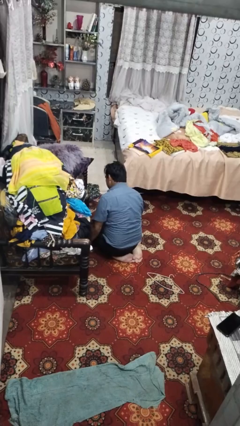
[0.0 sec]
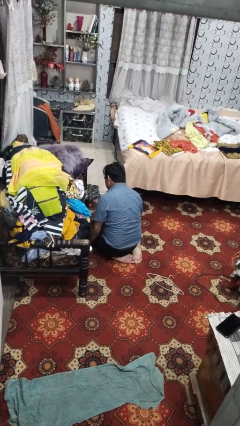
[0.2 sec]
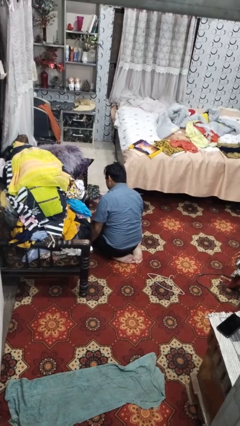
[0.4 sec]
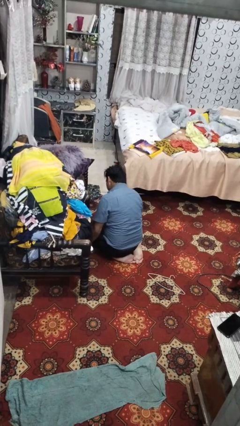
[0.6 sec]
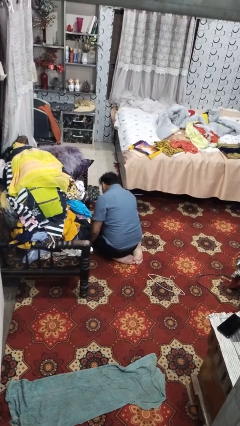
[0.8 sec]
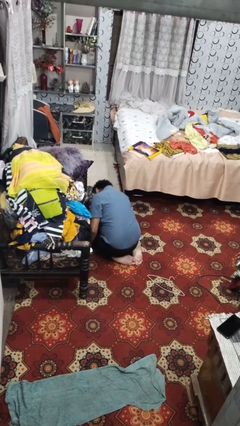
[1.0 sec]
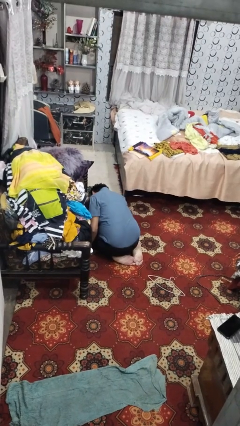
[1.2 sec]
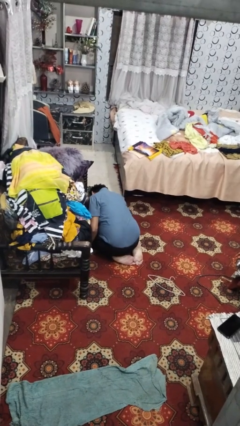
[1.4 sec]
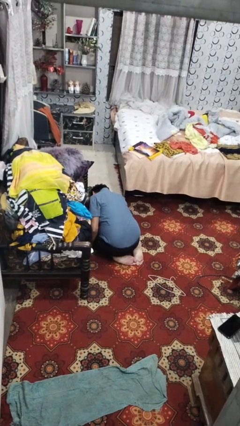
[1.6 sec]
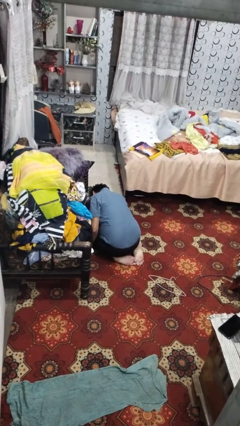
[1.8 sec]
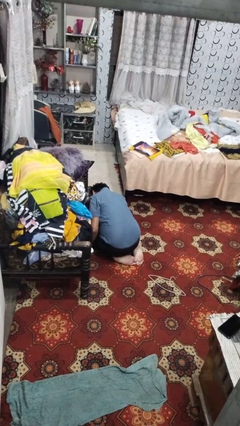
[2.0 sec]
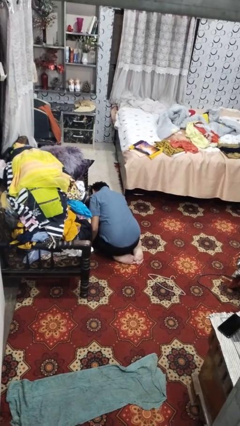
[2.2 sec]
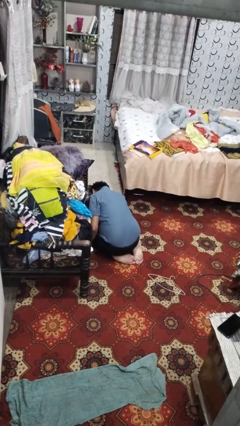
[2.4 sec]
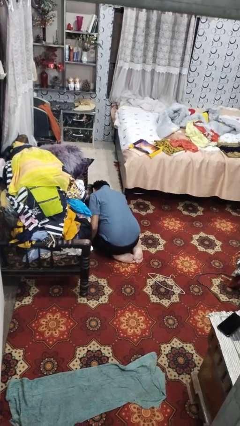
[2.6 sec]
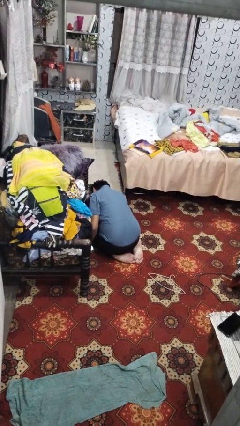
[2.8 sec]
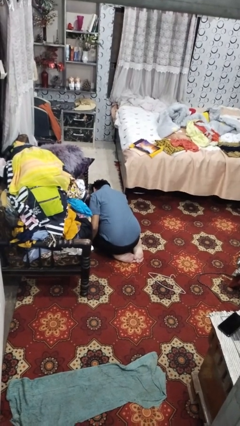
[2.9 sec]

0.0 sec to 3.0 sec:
person searches under couch

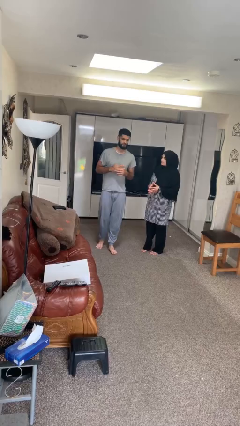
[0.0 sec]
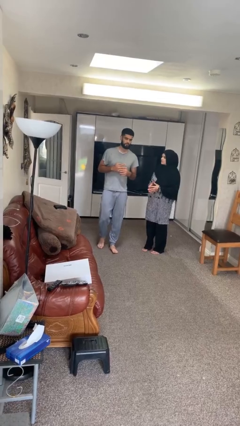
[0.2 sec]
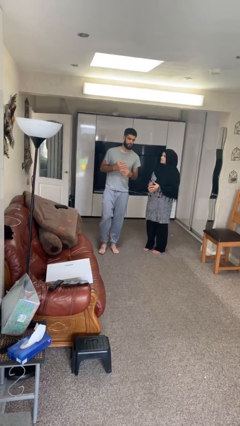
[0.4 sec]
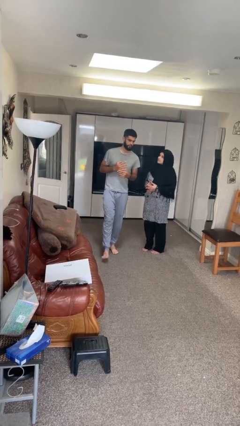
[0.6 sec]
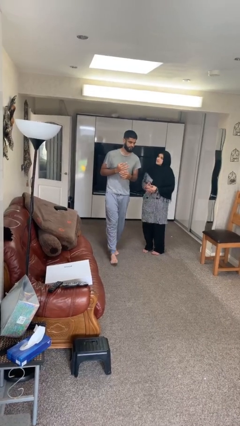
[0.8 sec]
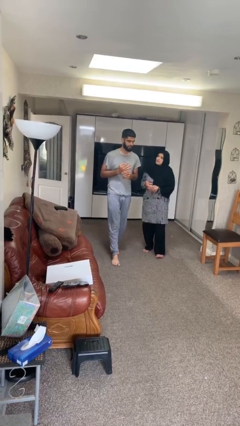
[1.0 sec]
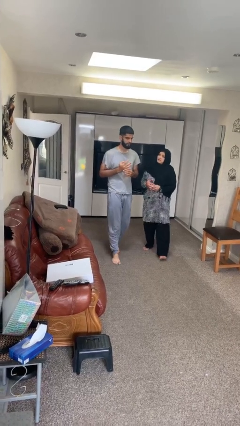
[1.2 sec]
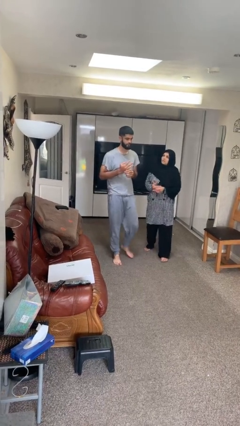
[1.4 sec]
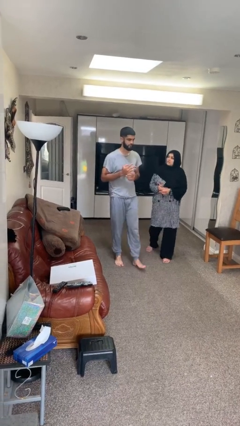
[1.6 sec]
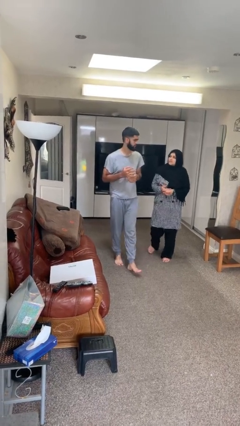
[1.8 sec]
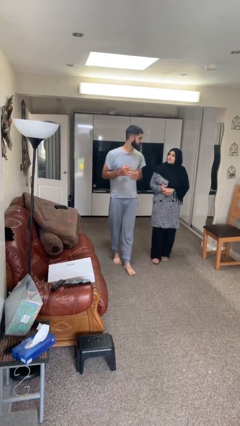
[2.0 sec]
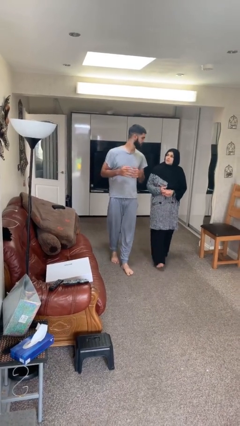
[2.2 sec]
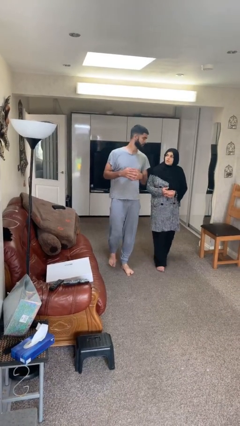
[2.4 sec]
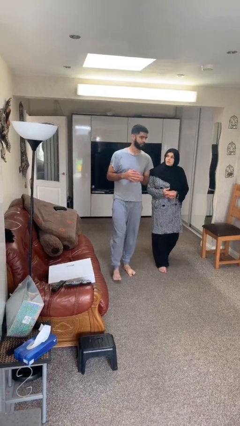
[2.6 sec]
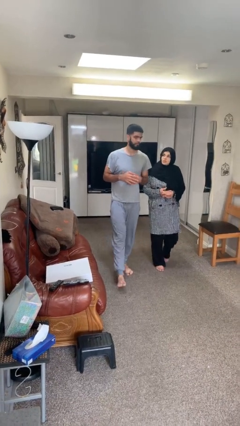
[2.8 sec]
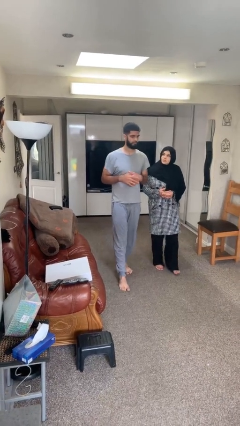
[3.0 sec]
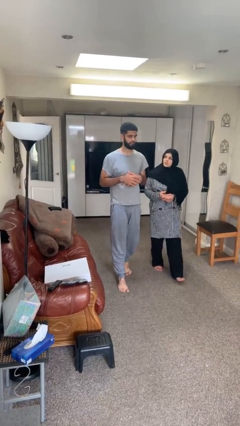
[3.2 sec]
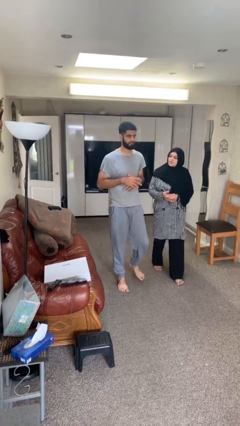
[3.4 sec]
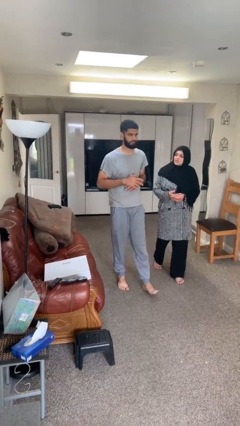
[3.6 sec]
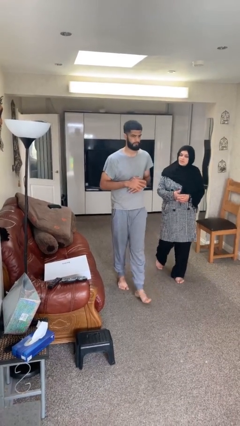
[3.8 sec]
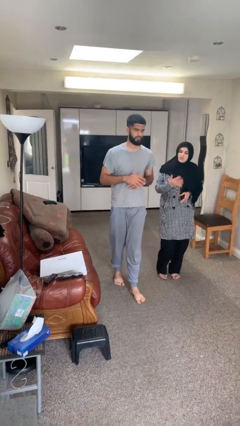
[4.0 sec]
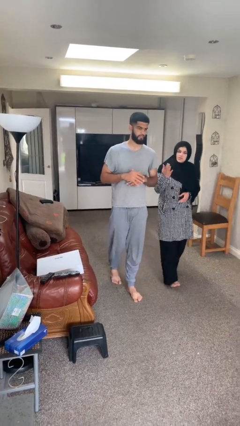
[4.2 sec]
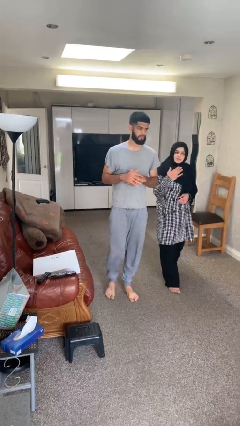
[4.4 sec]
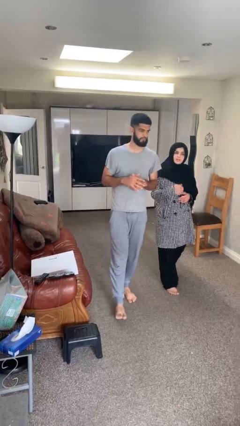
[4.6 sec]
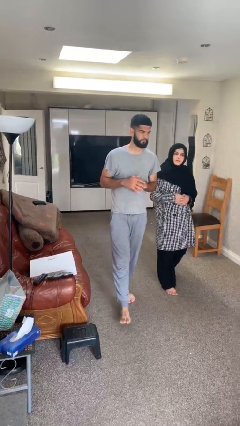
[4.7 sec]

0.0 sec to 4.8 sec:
person talks to person

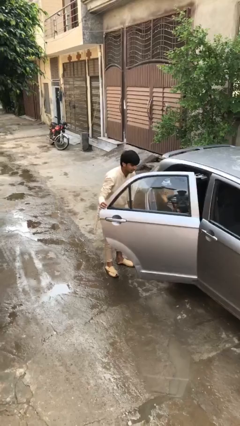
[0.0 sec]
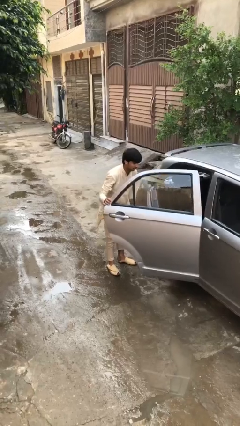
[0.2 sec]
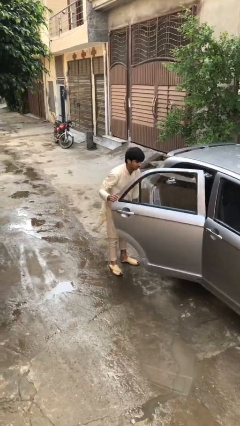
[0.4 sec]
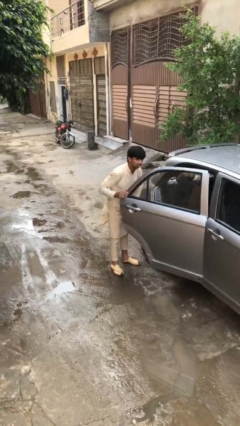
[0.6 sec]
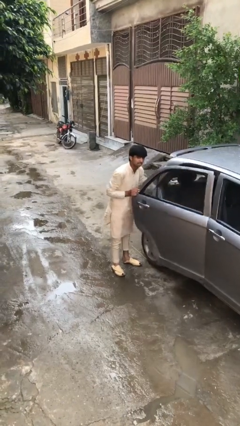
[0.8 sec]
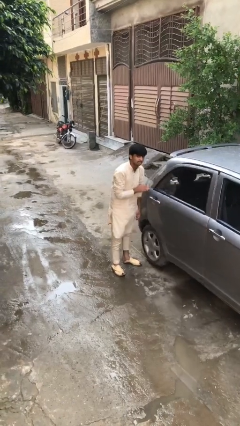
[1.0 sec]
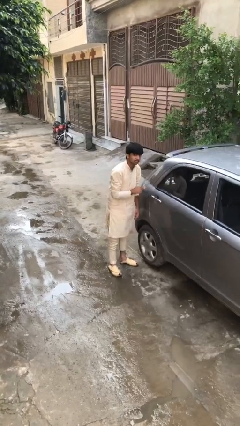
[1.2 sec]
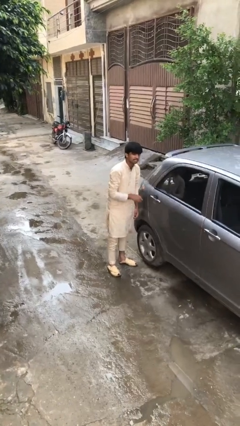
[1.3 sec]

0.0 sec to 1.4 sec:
person closes car door

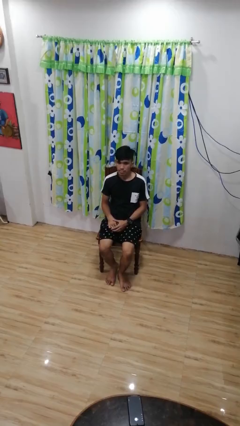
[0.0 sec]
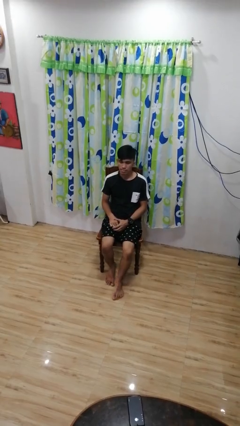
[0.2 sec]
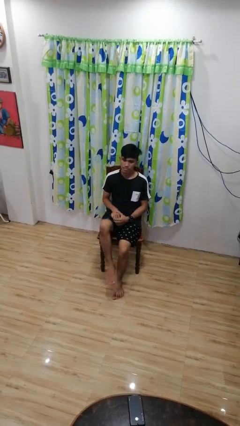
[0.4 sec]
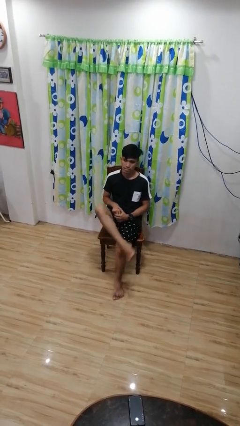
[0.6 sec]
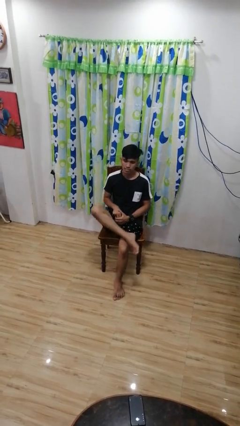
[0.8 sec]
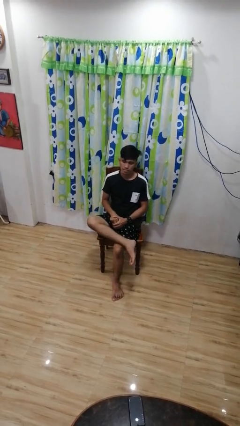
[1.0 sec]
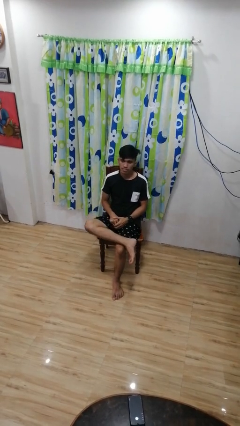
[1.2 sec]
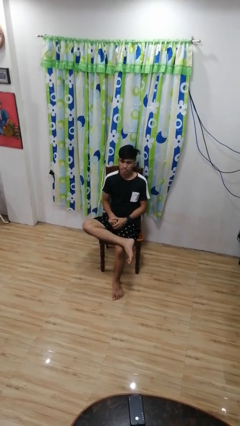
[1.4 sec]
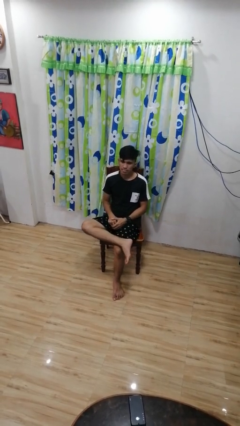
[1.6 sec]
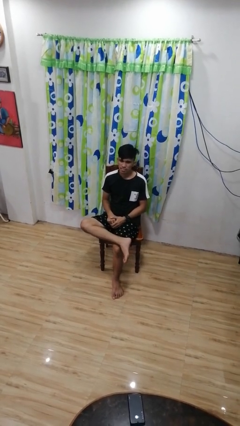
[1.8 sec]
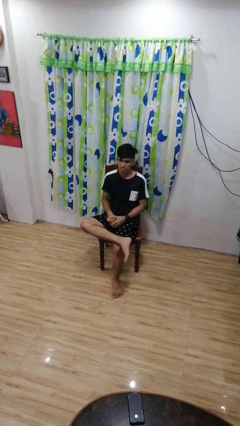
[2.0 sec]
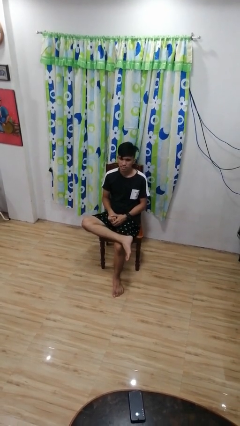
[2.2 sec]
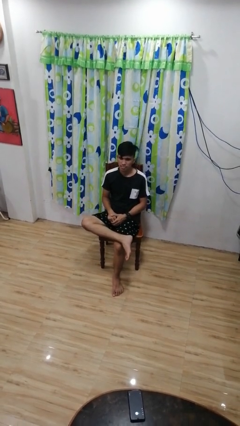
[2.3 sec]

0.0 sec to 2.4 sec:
person crosses legs

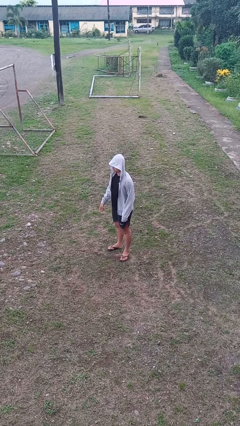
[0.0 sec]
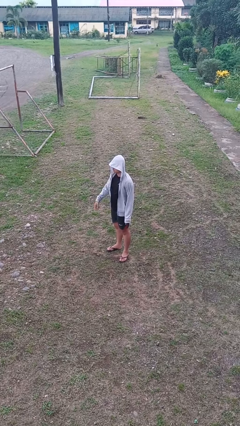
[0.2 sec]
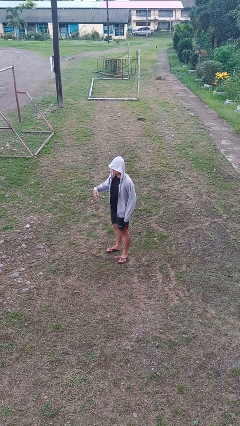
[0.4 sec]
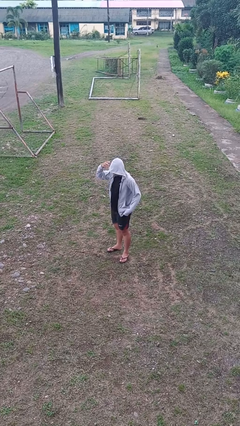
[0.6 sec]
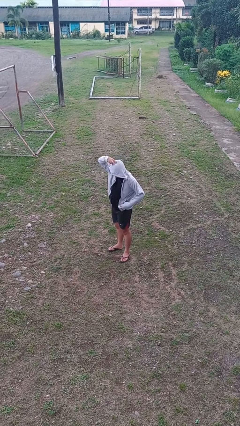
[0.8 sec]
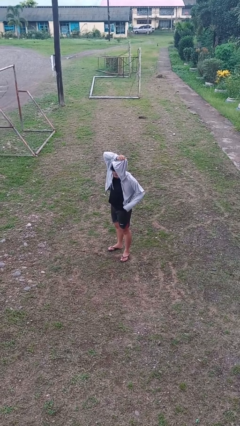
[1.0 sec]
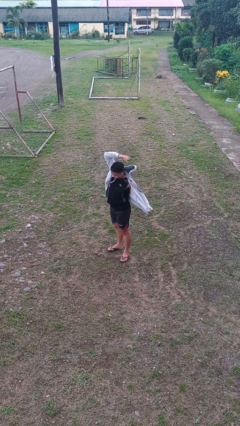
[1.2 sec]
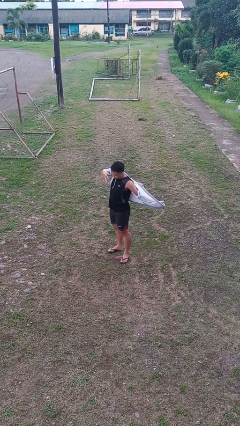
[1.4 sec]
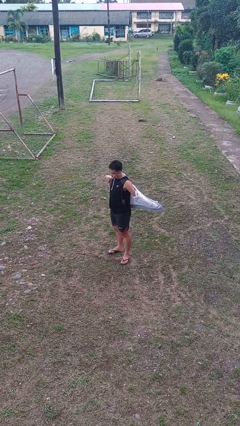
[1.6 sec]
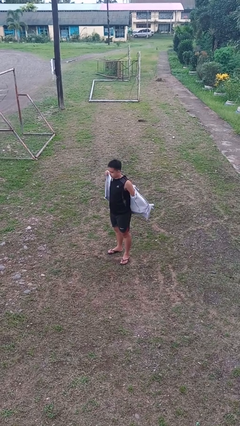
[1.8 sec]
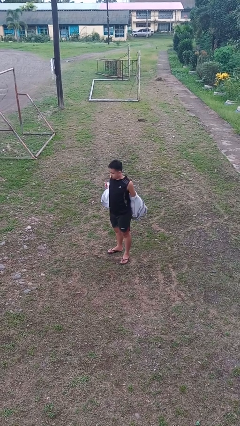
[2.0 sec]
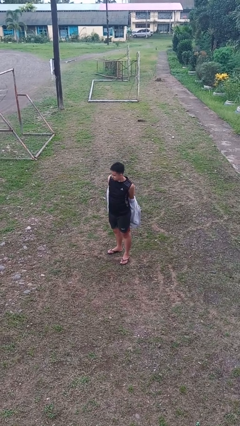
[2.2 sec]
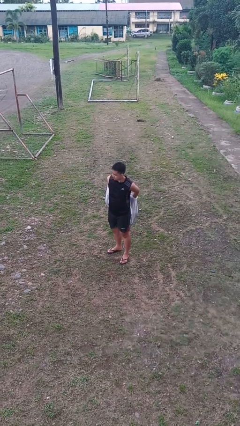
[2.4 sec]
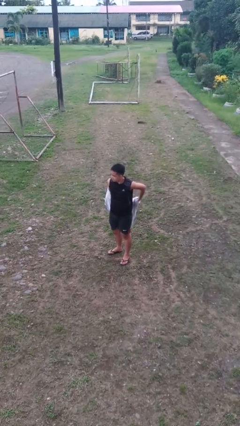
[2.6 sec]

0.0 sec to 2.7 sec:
person takes off hoodie

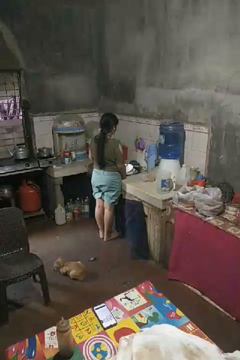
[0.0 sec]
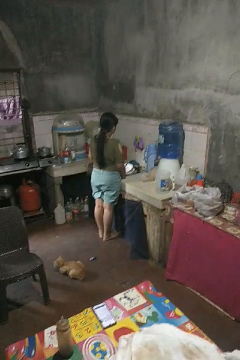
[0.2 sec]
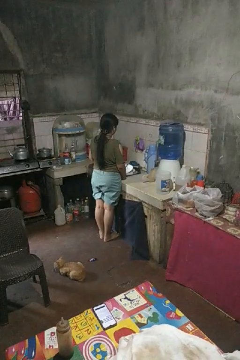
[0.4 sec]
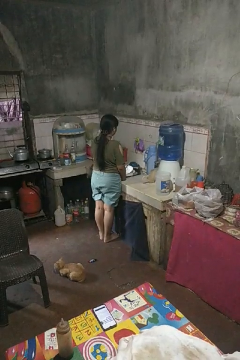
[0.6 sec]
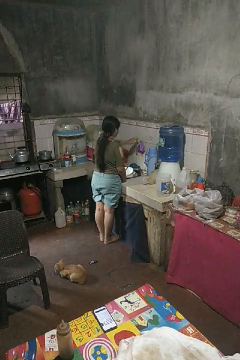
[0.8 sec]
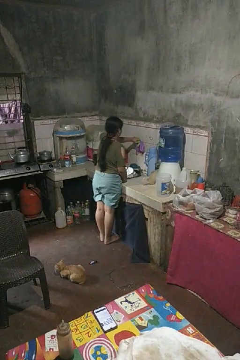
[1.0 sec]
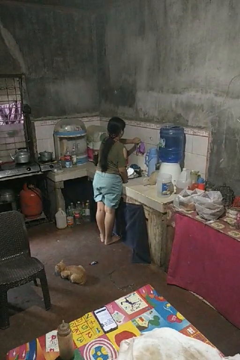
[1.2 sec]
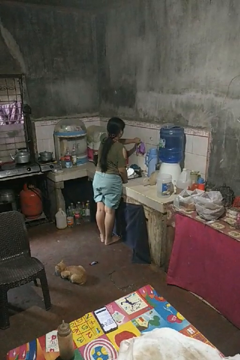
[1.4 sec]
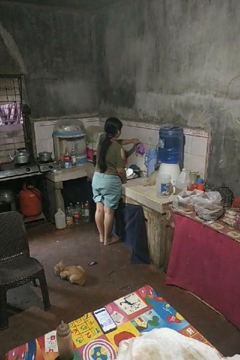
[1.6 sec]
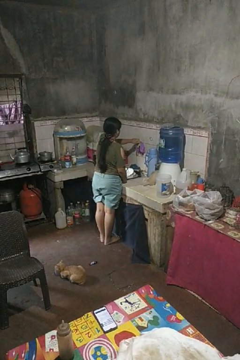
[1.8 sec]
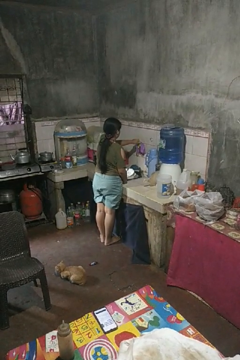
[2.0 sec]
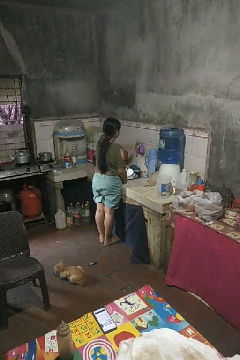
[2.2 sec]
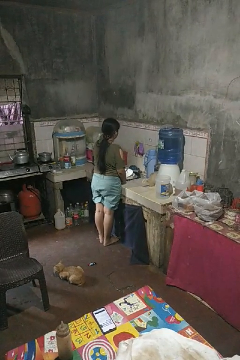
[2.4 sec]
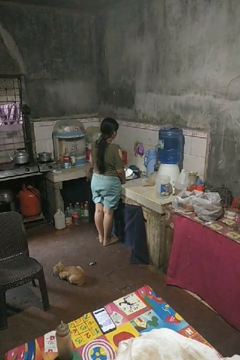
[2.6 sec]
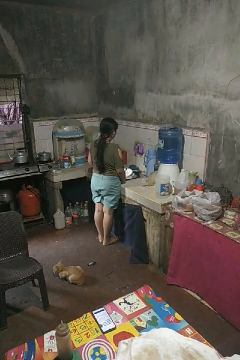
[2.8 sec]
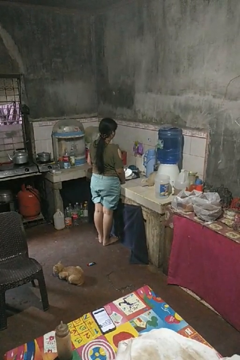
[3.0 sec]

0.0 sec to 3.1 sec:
person turns on faucet

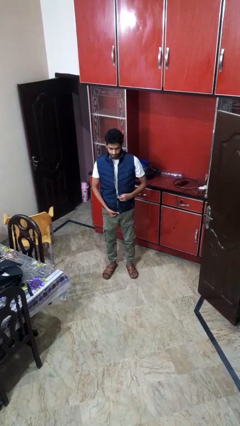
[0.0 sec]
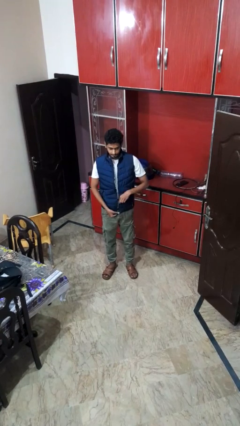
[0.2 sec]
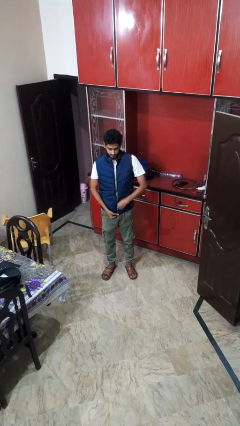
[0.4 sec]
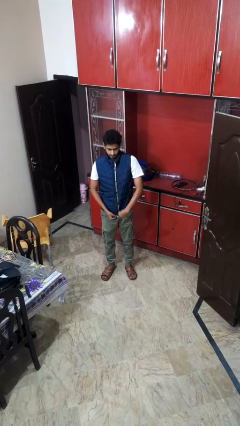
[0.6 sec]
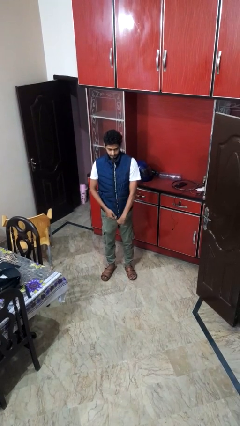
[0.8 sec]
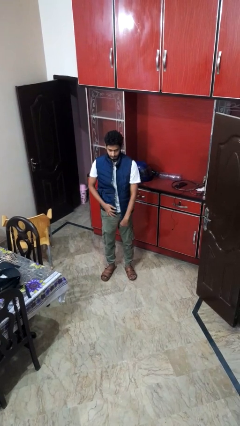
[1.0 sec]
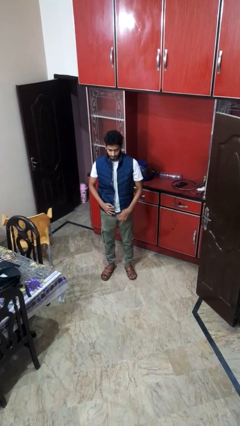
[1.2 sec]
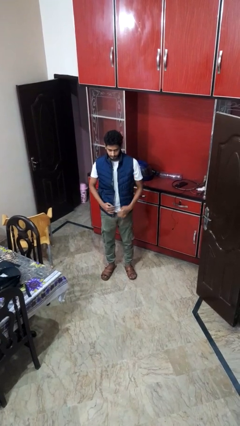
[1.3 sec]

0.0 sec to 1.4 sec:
person unzips jacket
